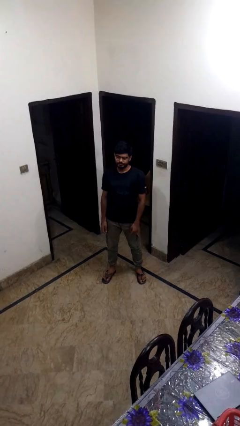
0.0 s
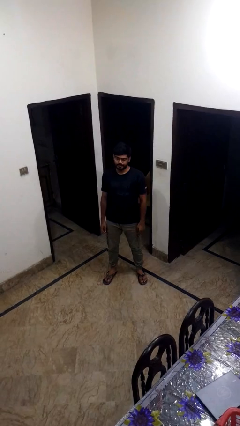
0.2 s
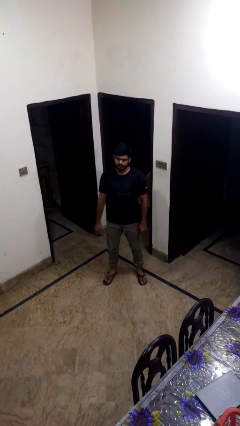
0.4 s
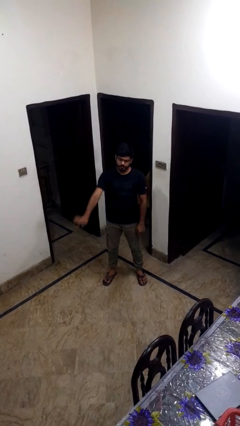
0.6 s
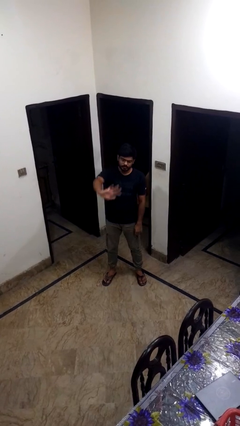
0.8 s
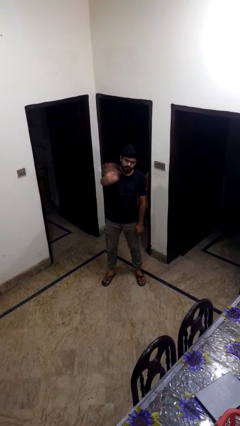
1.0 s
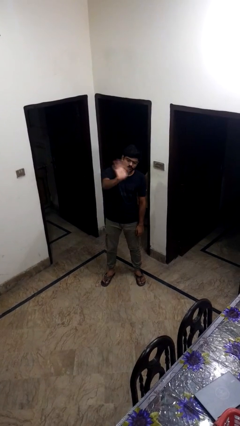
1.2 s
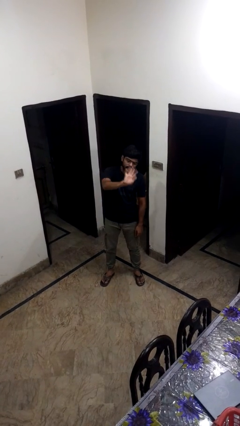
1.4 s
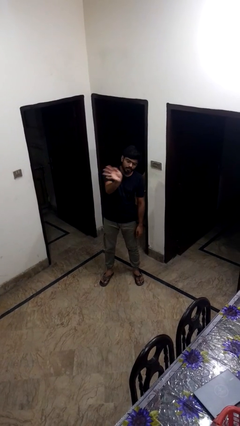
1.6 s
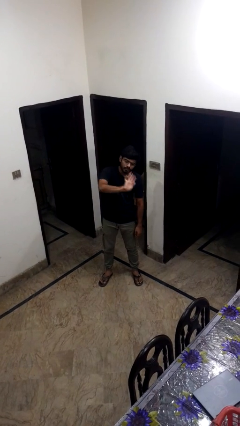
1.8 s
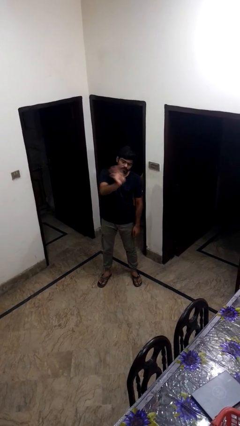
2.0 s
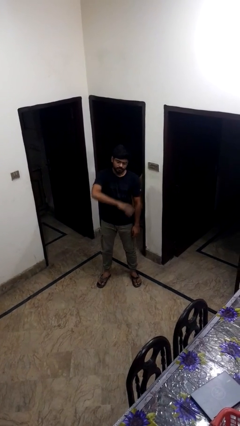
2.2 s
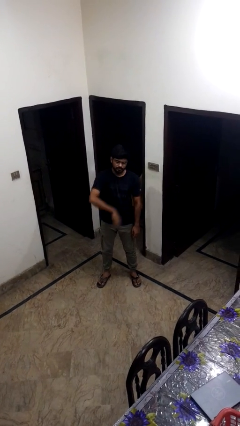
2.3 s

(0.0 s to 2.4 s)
person waves at person

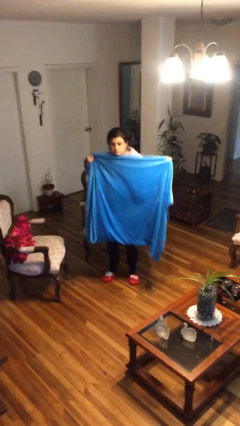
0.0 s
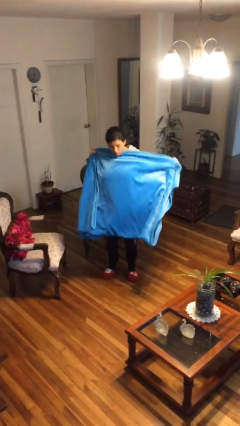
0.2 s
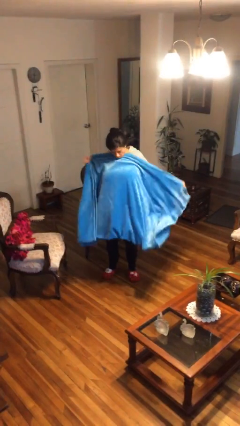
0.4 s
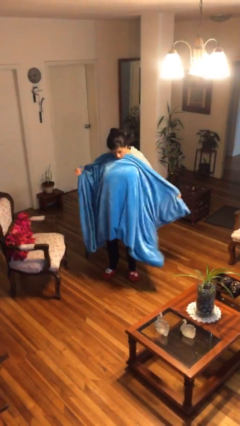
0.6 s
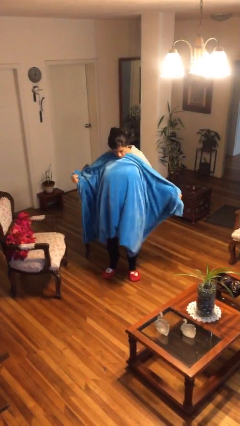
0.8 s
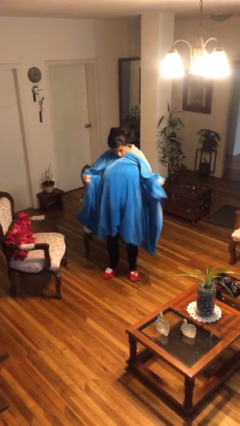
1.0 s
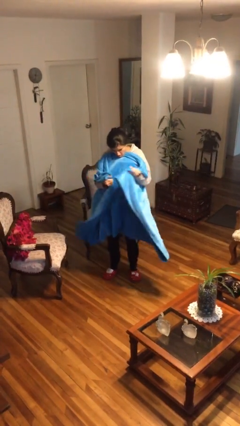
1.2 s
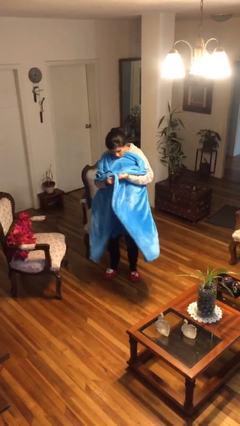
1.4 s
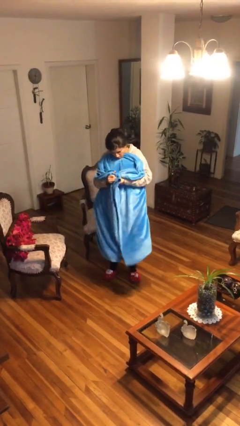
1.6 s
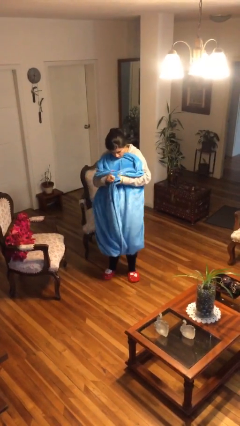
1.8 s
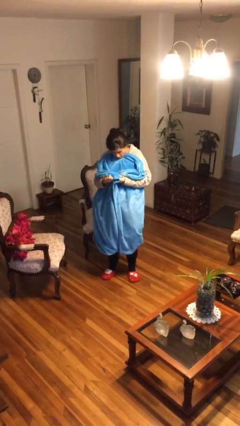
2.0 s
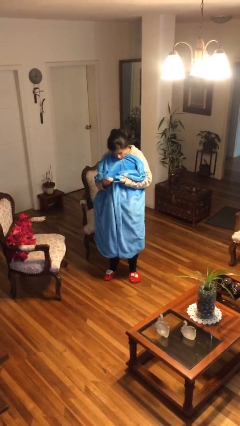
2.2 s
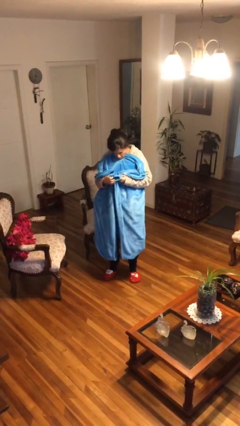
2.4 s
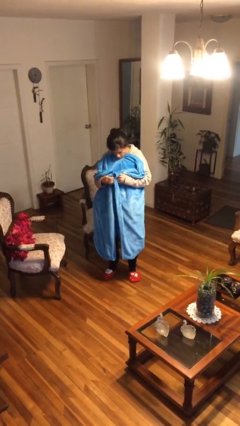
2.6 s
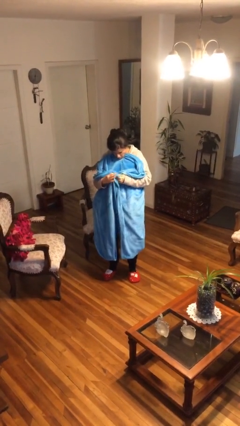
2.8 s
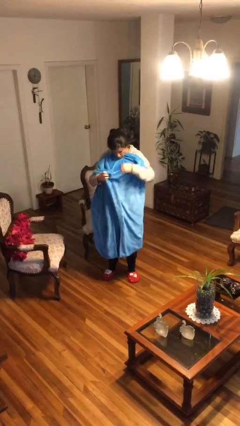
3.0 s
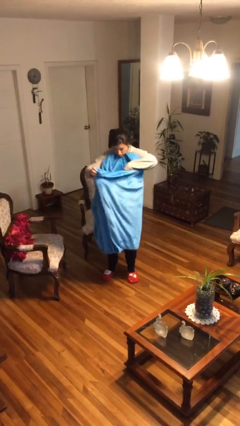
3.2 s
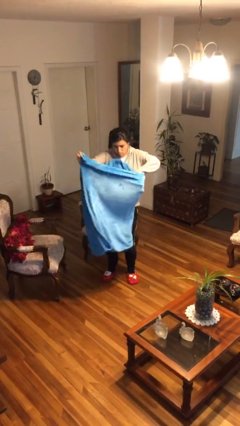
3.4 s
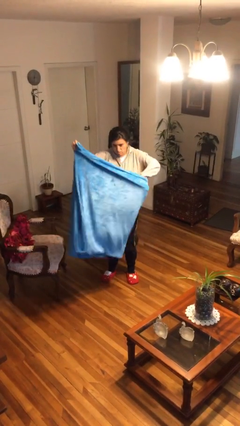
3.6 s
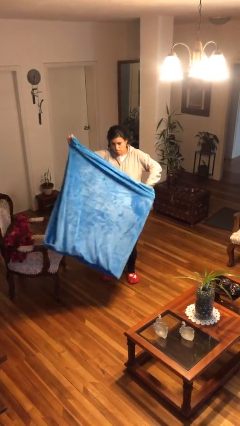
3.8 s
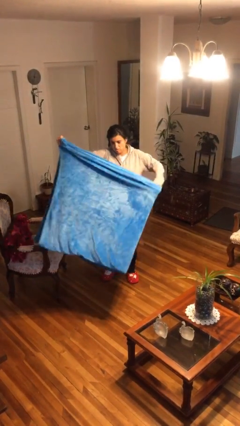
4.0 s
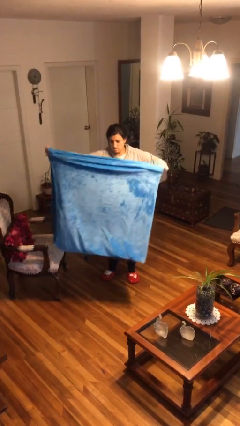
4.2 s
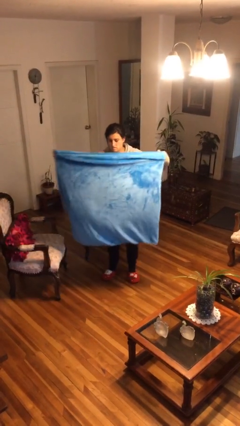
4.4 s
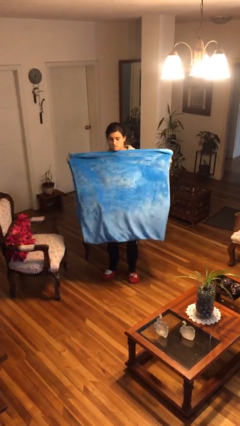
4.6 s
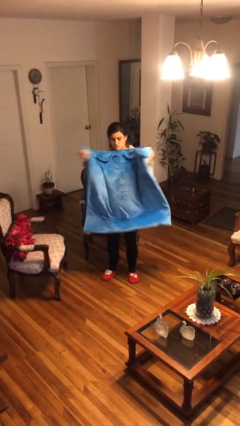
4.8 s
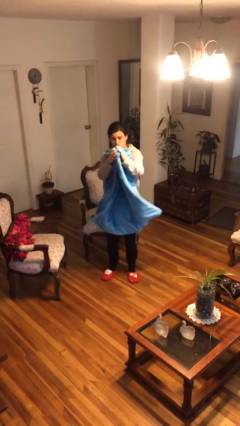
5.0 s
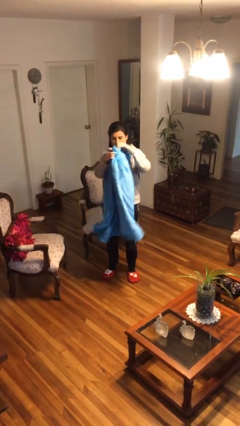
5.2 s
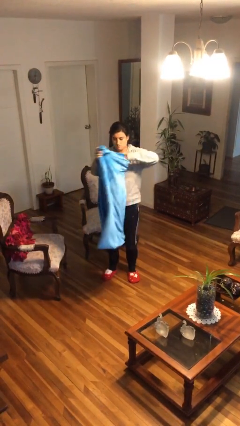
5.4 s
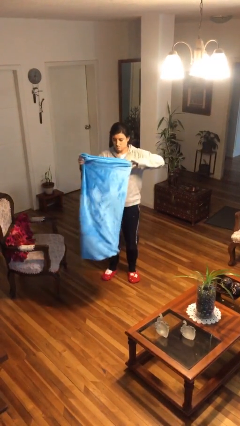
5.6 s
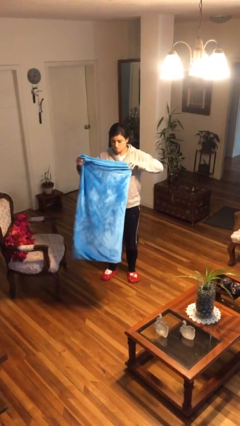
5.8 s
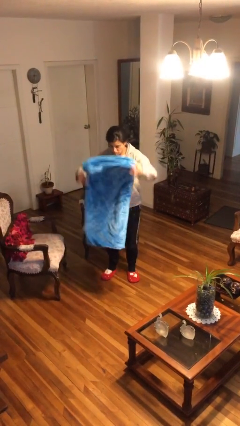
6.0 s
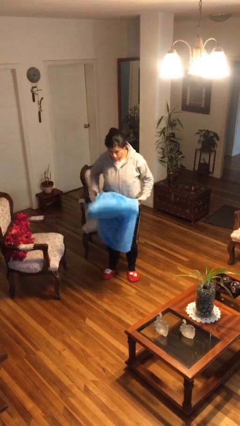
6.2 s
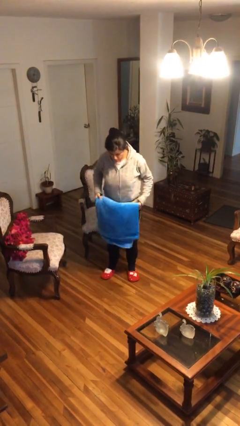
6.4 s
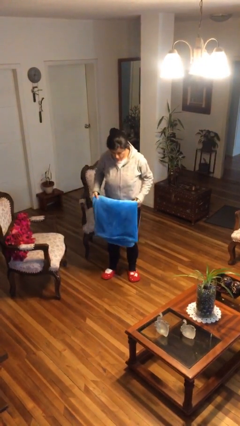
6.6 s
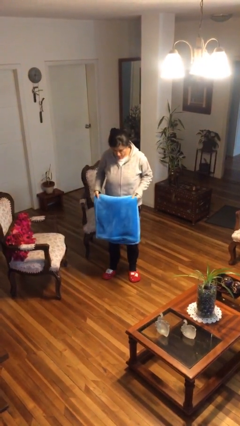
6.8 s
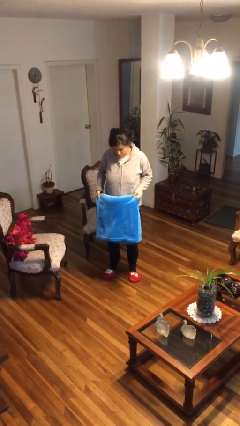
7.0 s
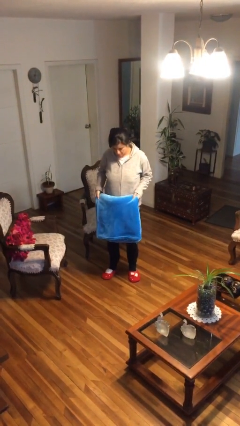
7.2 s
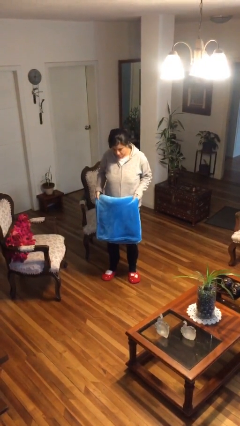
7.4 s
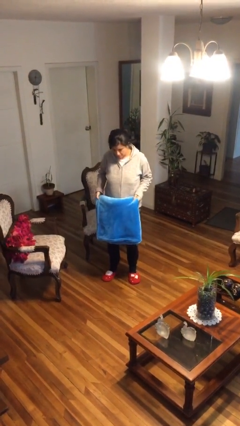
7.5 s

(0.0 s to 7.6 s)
person folds blanket

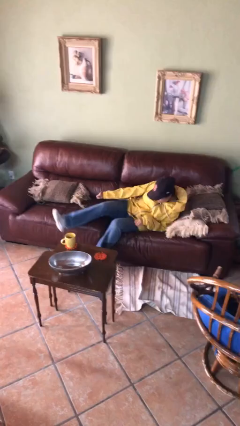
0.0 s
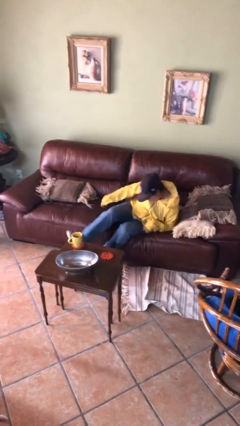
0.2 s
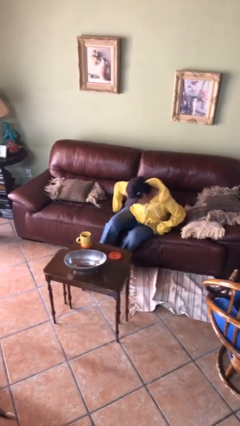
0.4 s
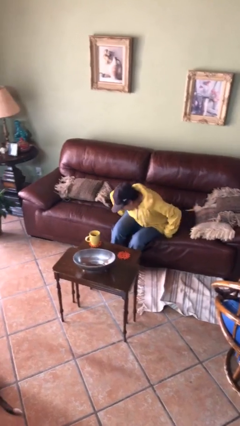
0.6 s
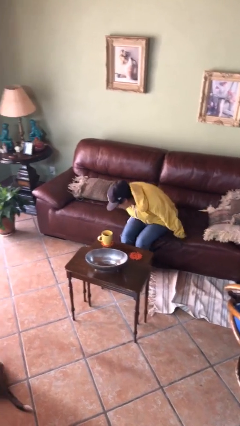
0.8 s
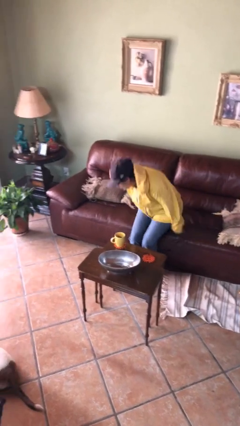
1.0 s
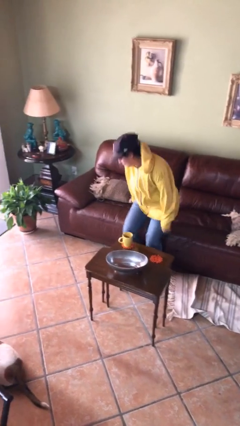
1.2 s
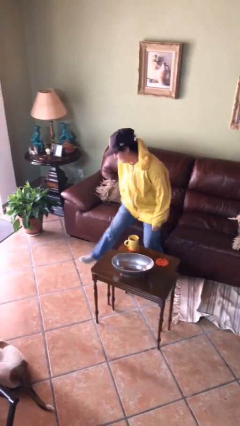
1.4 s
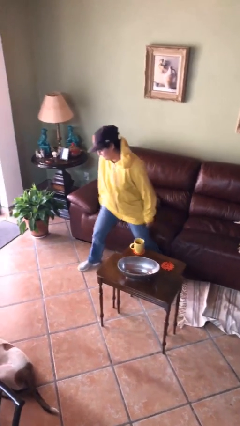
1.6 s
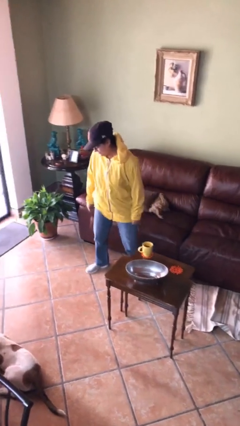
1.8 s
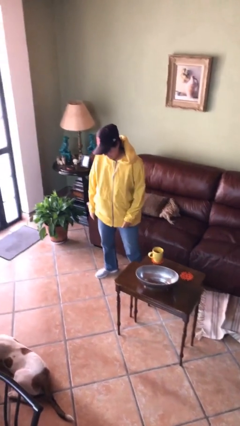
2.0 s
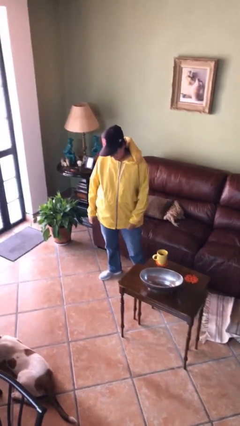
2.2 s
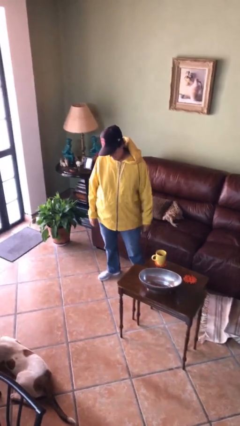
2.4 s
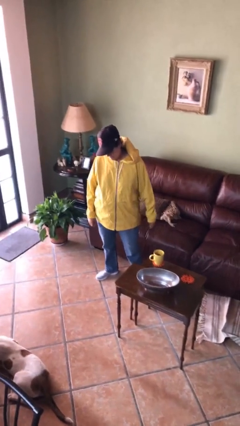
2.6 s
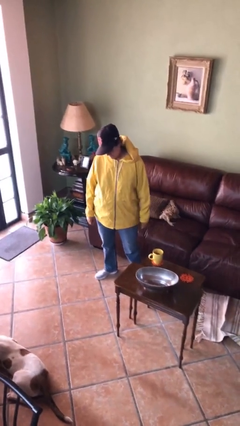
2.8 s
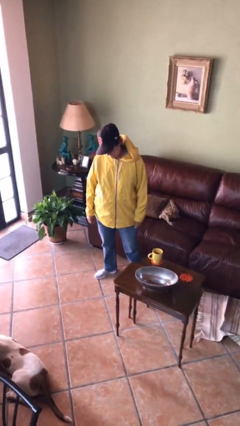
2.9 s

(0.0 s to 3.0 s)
person stands up

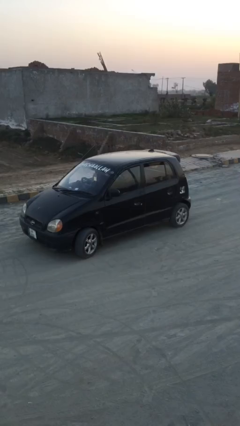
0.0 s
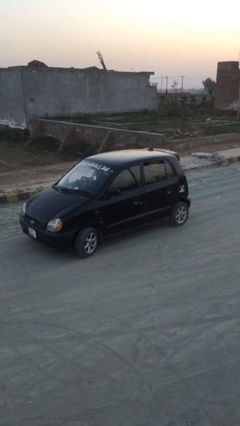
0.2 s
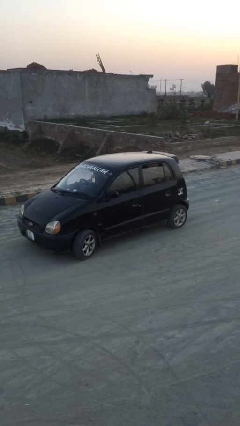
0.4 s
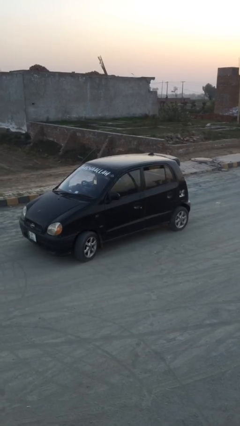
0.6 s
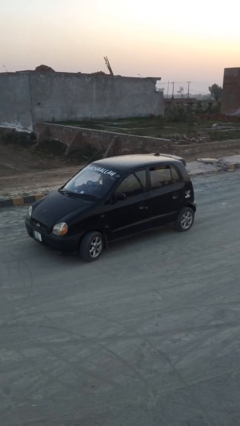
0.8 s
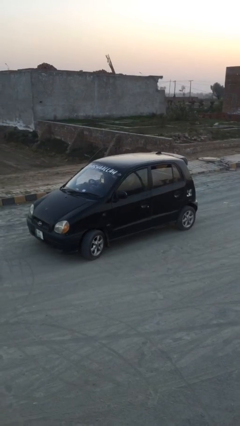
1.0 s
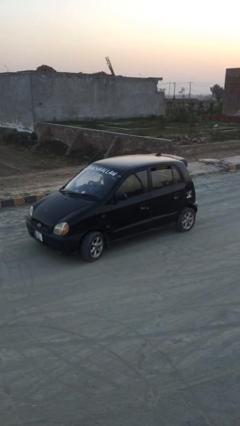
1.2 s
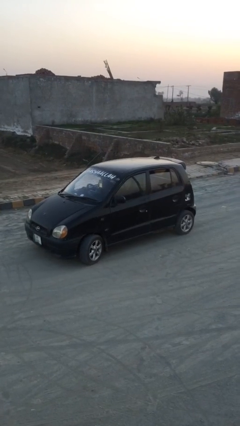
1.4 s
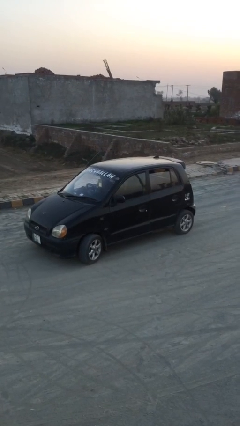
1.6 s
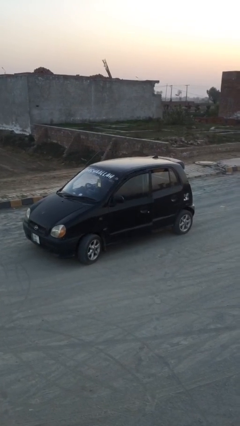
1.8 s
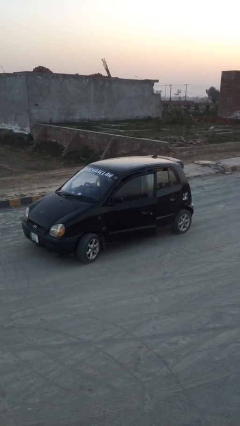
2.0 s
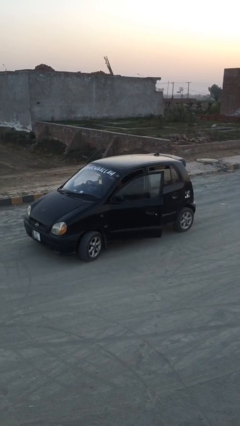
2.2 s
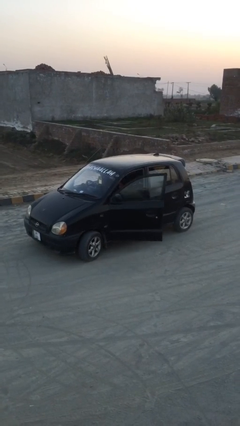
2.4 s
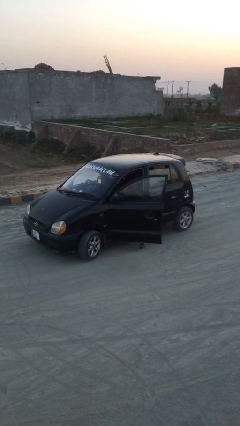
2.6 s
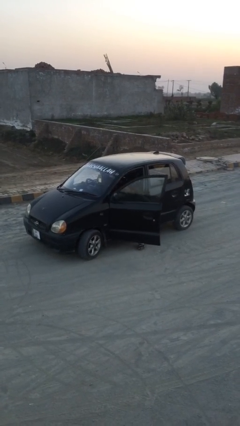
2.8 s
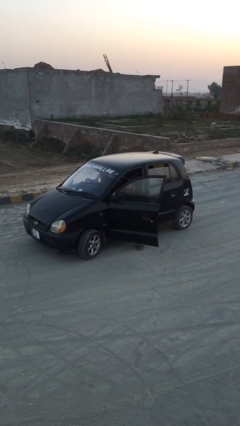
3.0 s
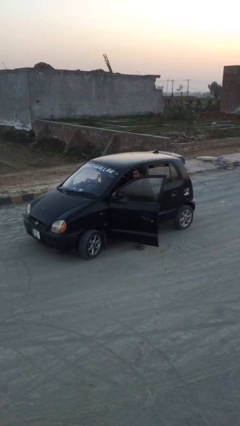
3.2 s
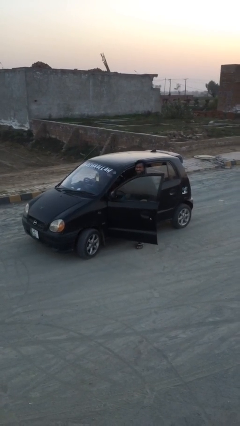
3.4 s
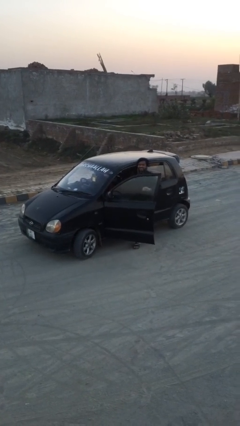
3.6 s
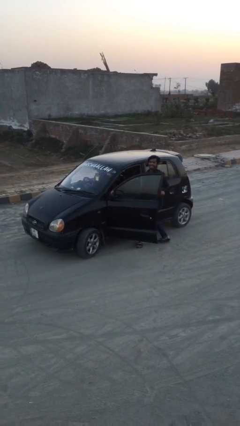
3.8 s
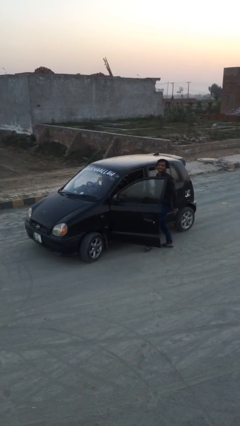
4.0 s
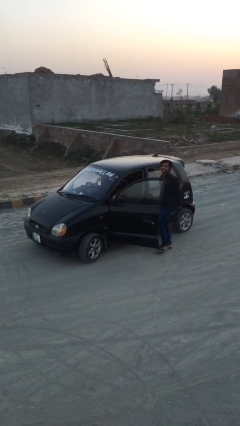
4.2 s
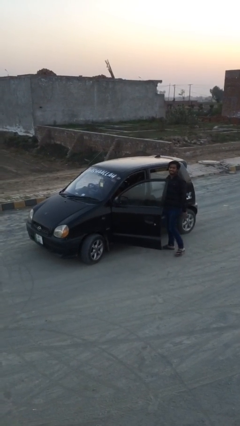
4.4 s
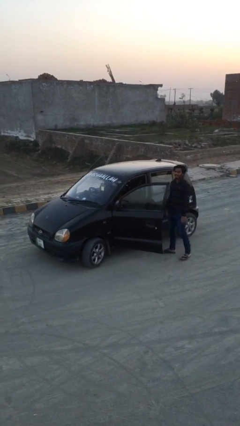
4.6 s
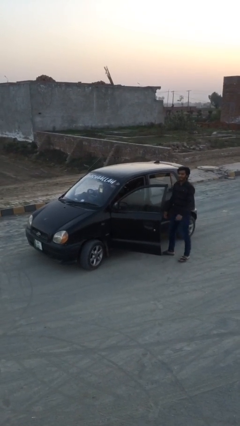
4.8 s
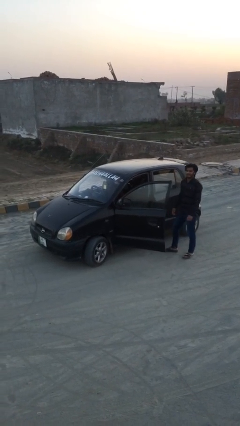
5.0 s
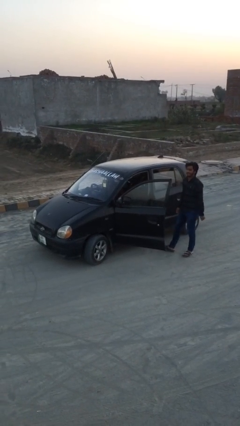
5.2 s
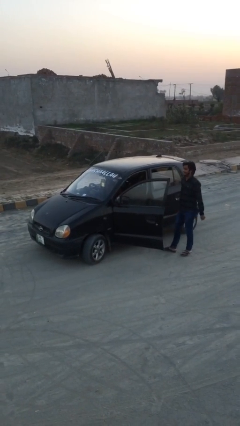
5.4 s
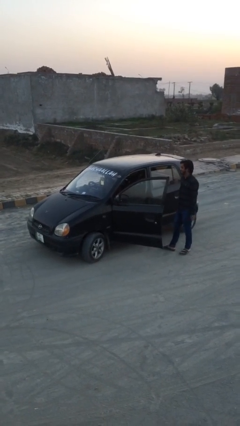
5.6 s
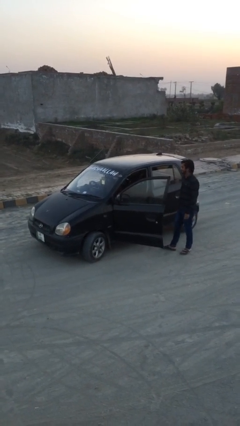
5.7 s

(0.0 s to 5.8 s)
car drops off person
